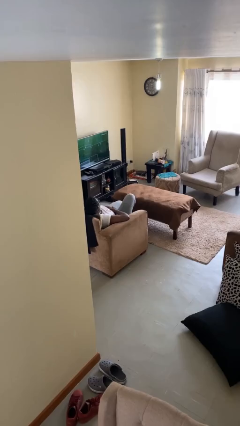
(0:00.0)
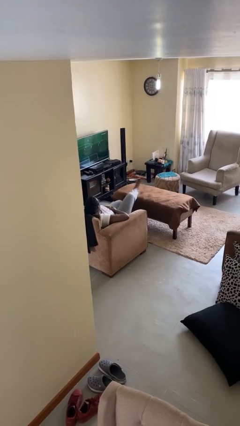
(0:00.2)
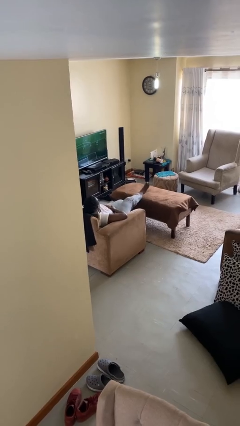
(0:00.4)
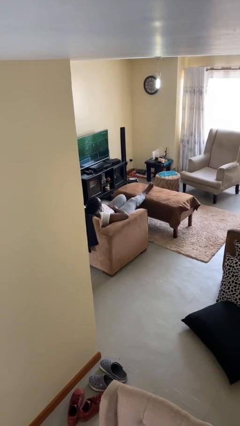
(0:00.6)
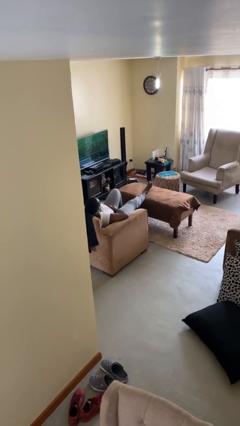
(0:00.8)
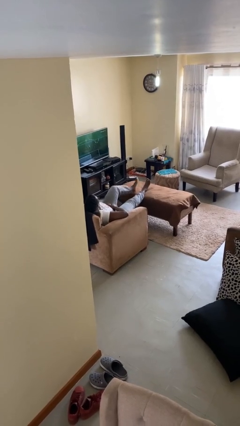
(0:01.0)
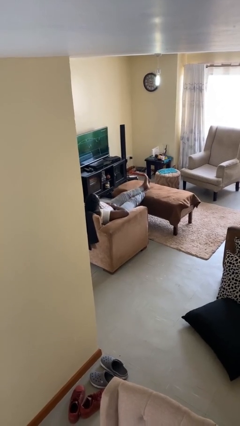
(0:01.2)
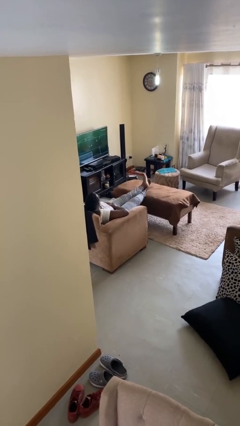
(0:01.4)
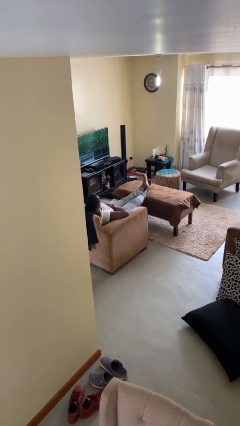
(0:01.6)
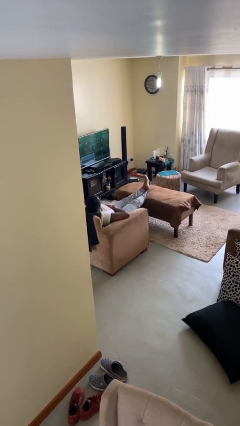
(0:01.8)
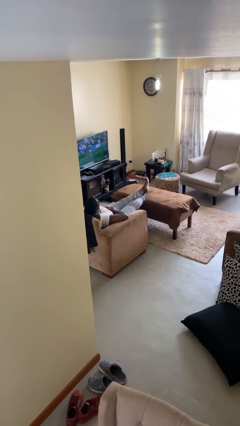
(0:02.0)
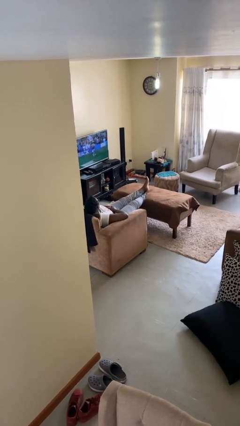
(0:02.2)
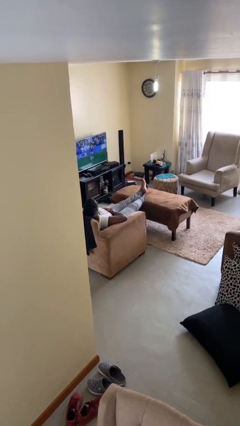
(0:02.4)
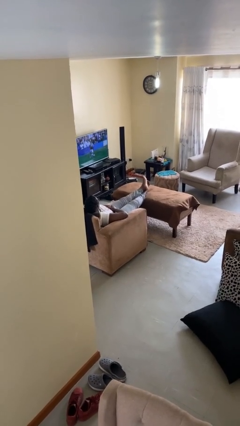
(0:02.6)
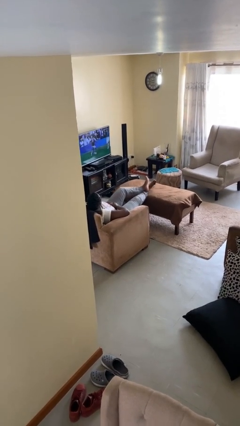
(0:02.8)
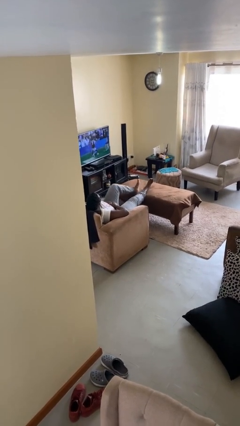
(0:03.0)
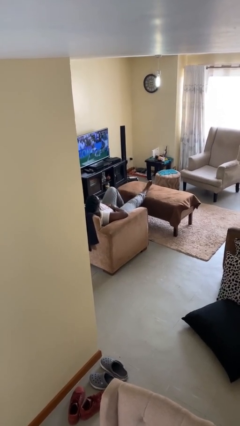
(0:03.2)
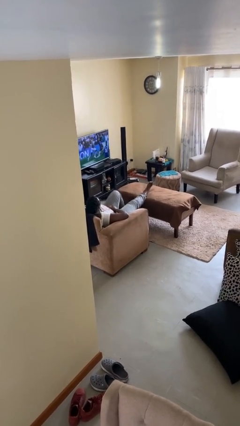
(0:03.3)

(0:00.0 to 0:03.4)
person puts feet up

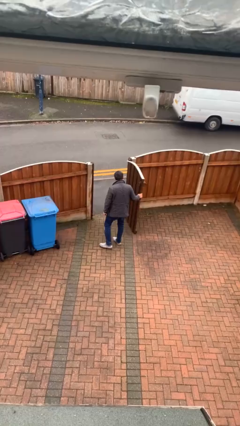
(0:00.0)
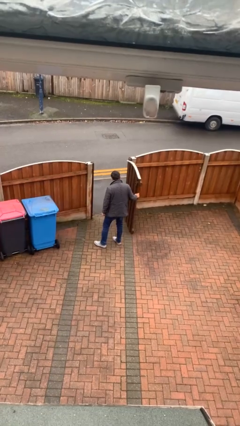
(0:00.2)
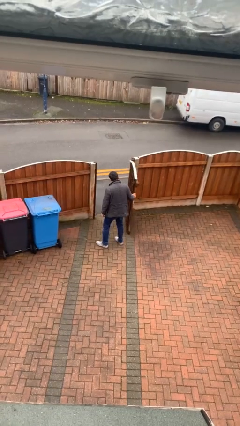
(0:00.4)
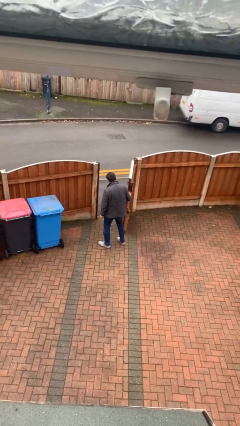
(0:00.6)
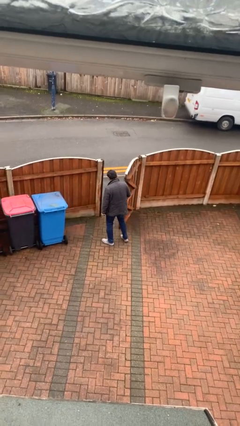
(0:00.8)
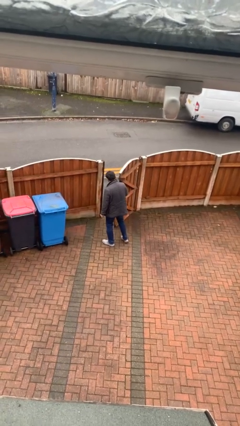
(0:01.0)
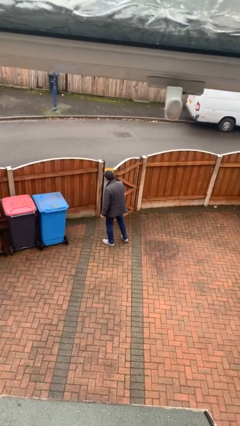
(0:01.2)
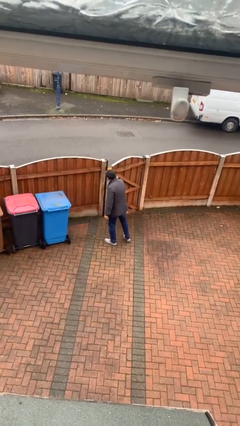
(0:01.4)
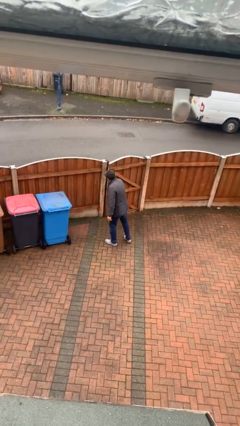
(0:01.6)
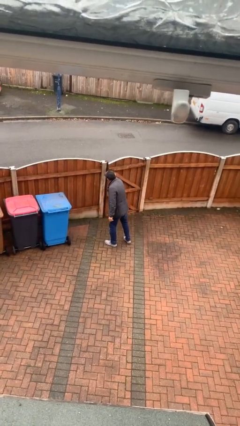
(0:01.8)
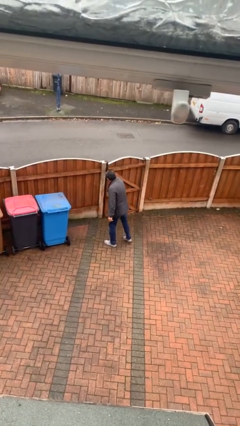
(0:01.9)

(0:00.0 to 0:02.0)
person closes facility door

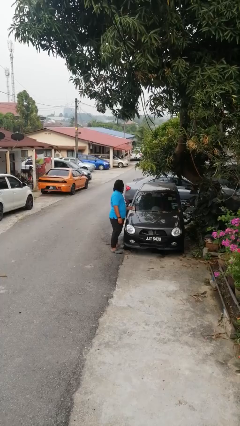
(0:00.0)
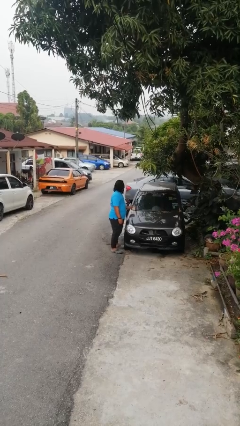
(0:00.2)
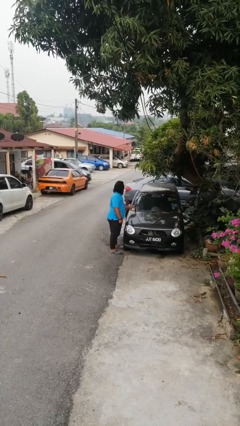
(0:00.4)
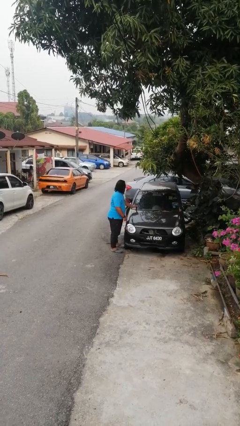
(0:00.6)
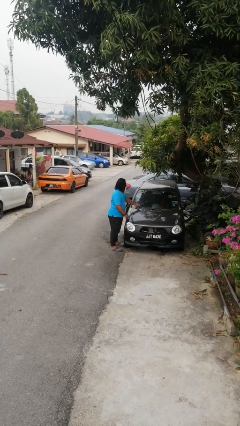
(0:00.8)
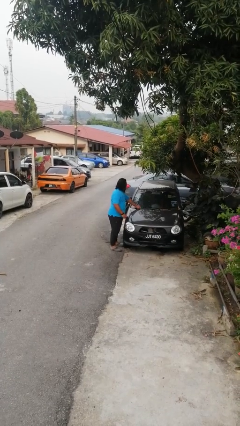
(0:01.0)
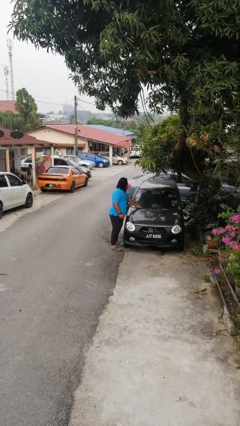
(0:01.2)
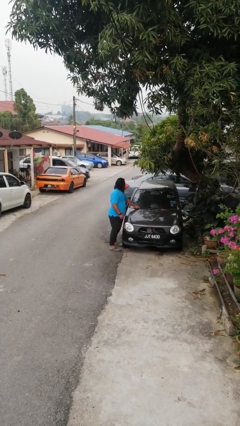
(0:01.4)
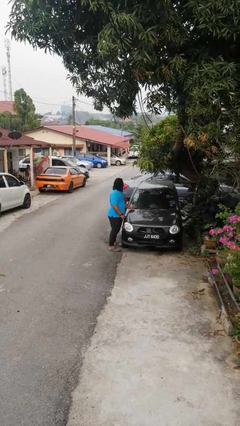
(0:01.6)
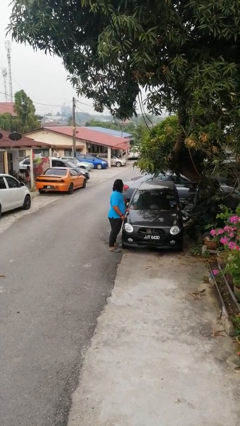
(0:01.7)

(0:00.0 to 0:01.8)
person flips down car wipers

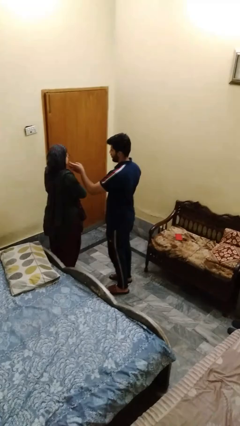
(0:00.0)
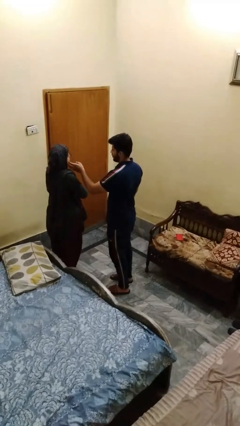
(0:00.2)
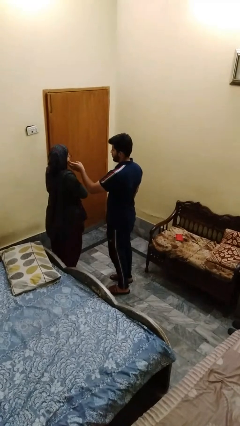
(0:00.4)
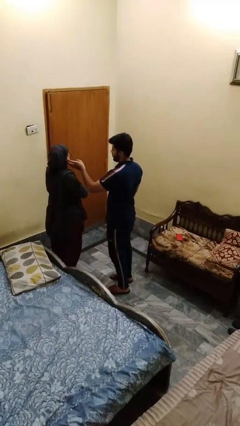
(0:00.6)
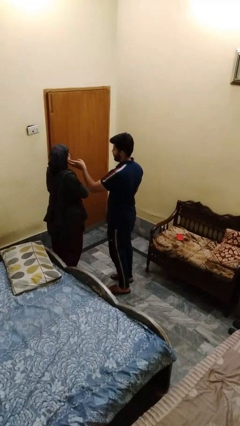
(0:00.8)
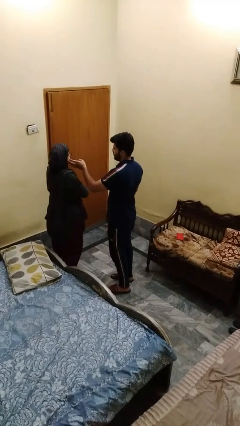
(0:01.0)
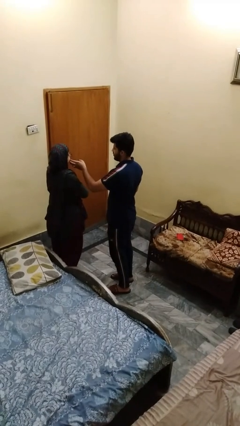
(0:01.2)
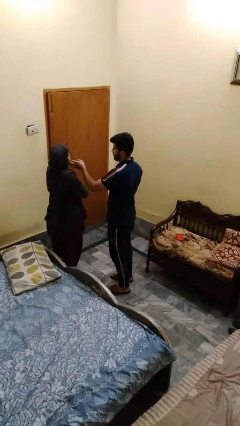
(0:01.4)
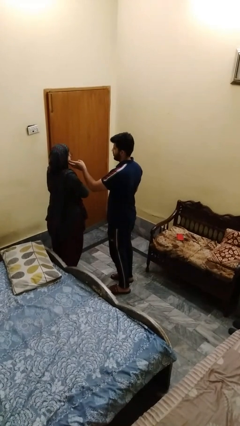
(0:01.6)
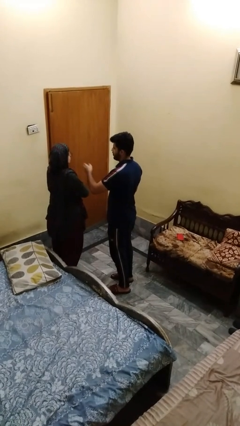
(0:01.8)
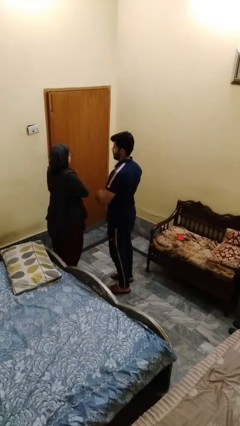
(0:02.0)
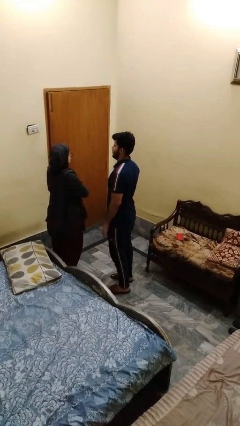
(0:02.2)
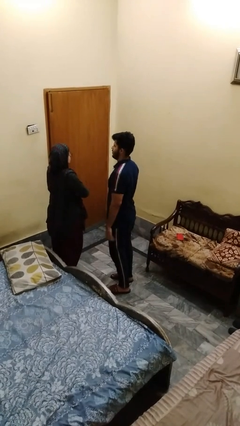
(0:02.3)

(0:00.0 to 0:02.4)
person touches face of person

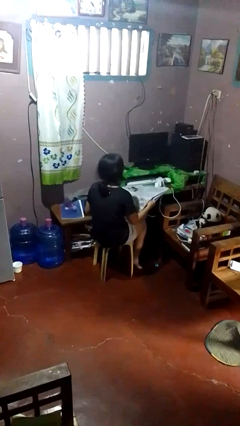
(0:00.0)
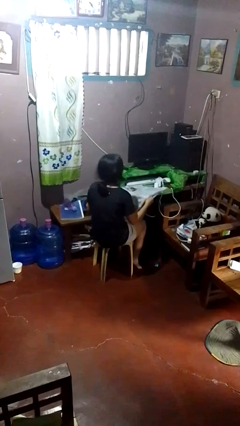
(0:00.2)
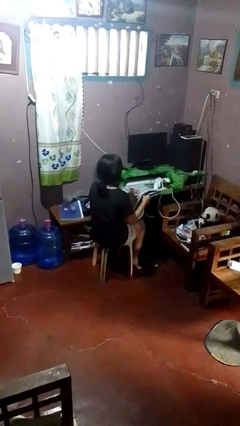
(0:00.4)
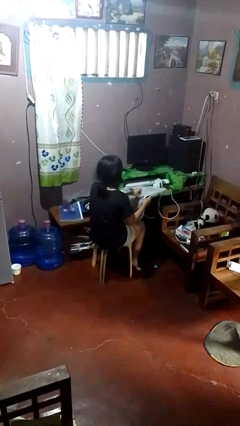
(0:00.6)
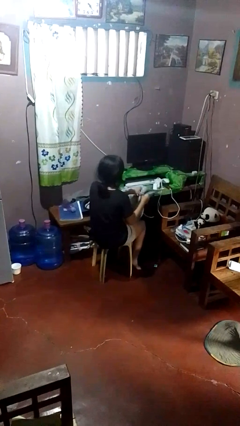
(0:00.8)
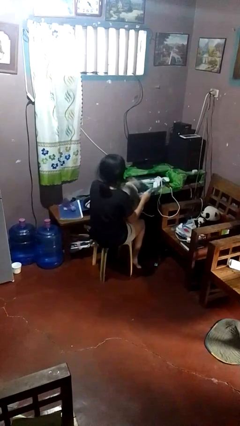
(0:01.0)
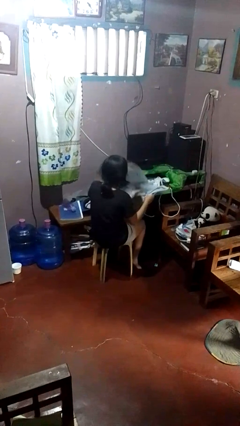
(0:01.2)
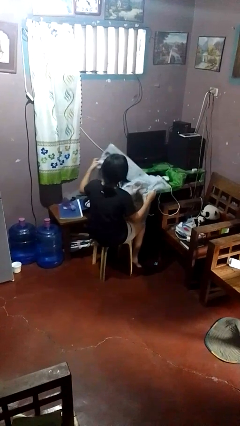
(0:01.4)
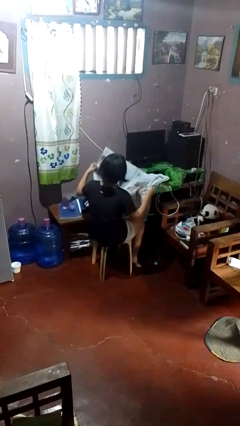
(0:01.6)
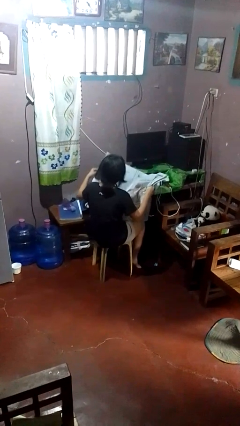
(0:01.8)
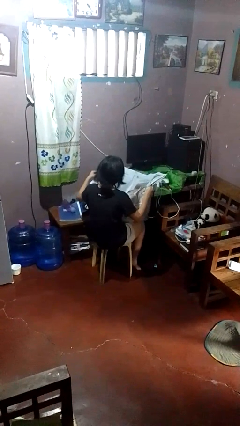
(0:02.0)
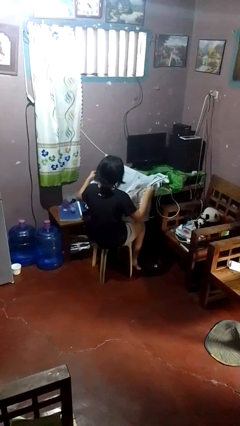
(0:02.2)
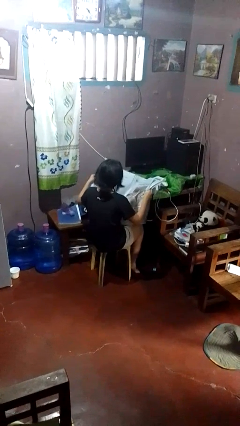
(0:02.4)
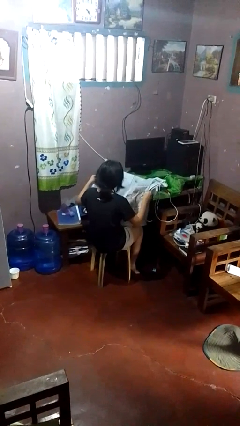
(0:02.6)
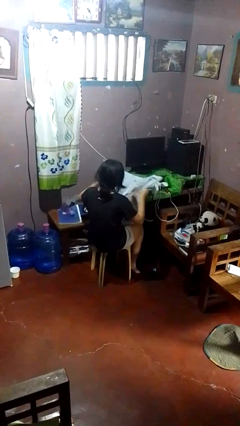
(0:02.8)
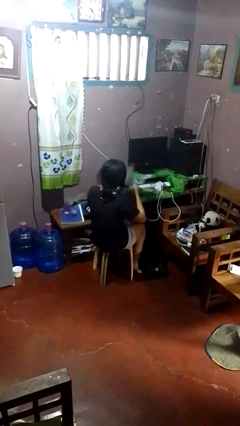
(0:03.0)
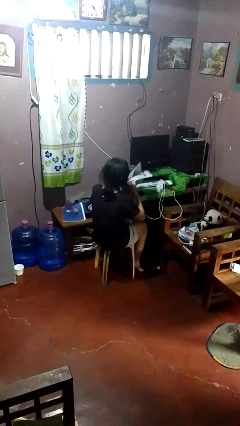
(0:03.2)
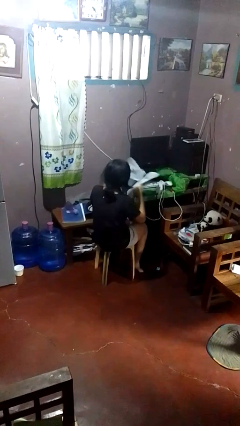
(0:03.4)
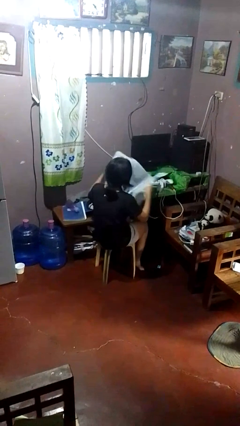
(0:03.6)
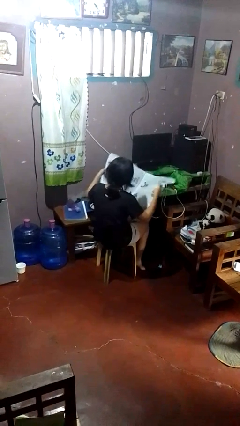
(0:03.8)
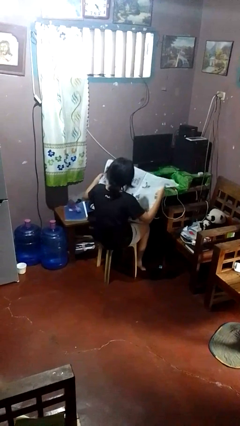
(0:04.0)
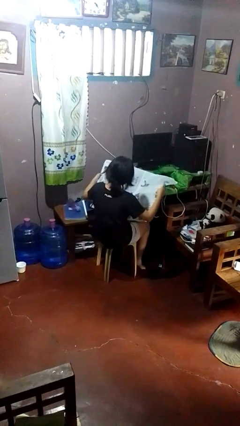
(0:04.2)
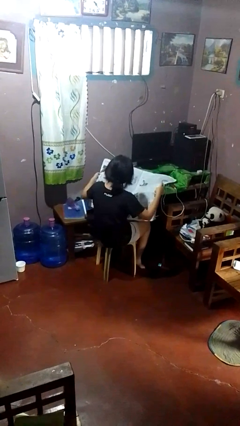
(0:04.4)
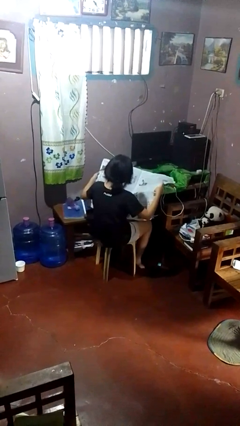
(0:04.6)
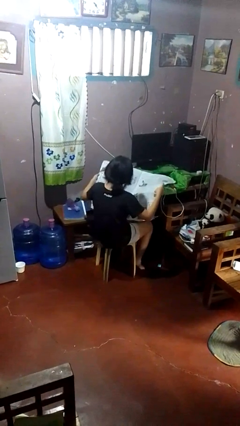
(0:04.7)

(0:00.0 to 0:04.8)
person reads newspaper

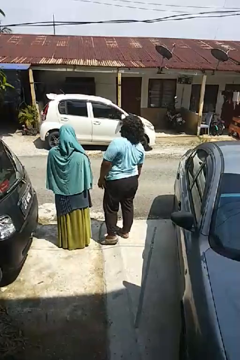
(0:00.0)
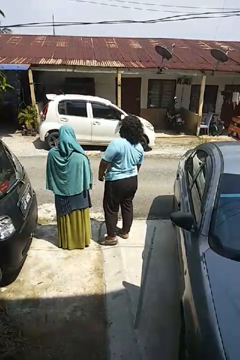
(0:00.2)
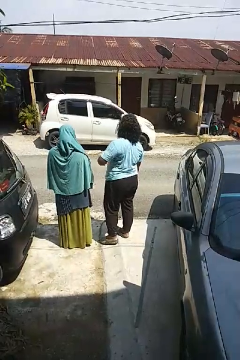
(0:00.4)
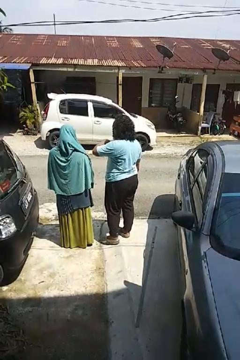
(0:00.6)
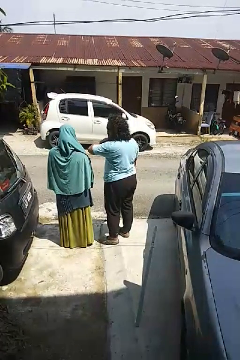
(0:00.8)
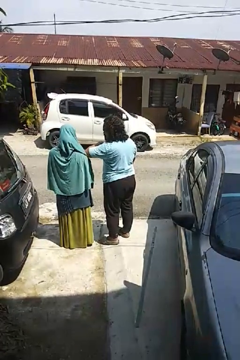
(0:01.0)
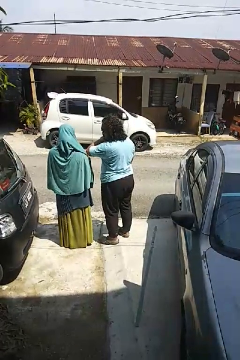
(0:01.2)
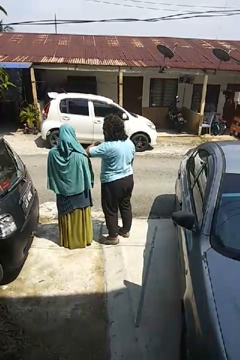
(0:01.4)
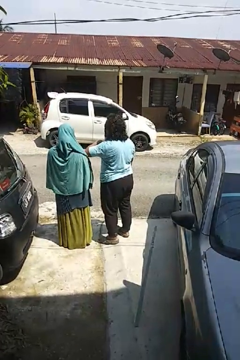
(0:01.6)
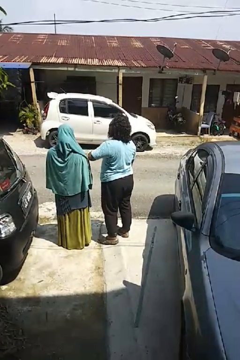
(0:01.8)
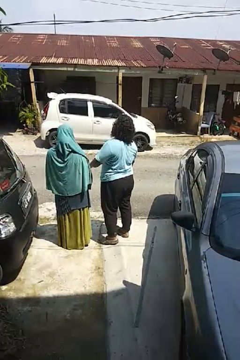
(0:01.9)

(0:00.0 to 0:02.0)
person nudges person with elbow

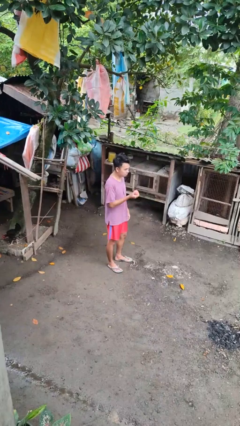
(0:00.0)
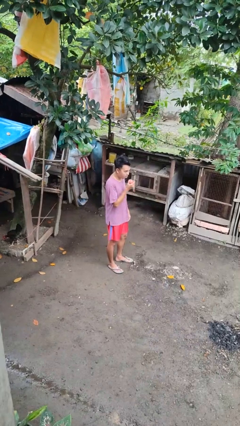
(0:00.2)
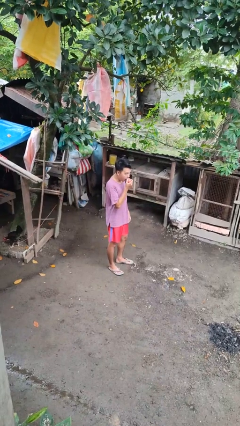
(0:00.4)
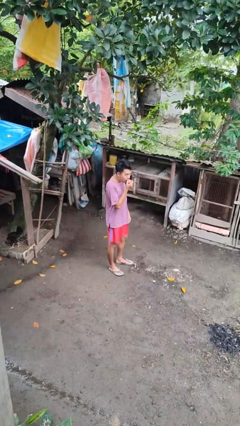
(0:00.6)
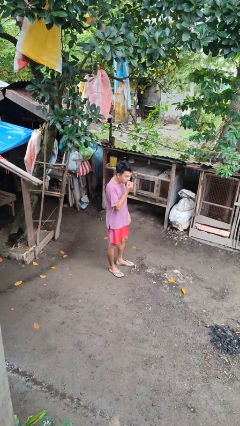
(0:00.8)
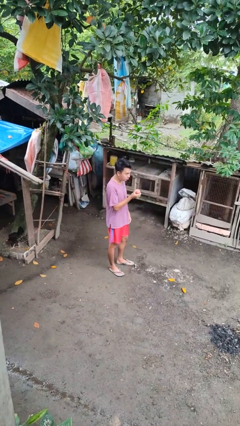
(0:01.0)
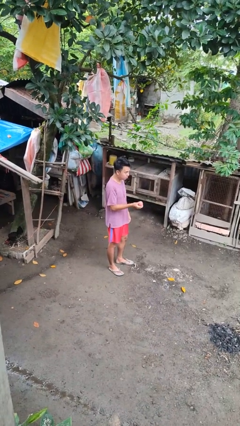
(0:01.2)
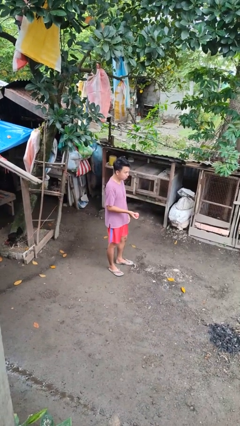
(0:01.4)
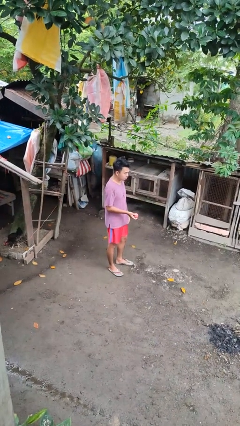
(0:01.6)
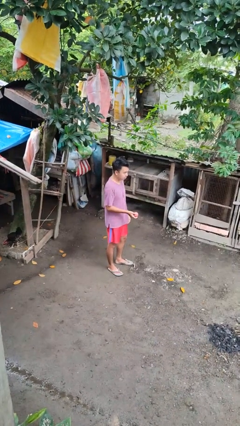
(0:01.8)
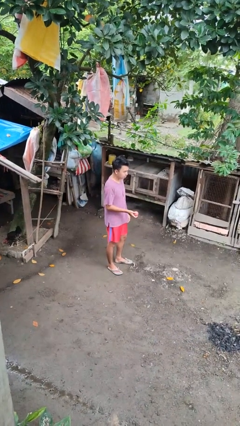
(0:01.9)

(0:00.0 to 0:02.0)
person eats apple
